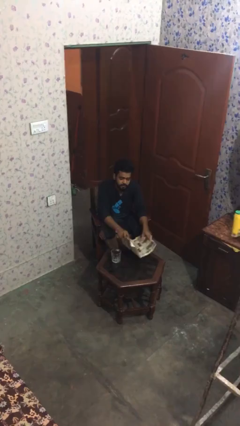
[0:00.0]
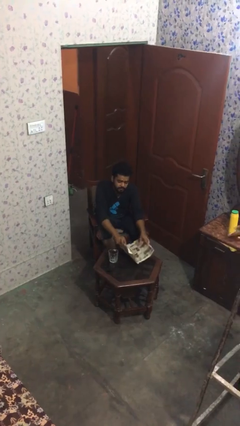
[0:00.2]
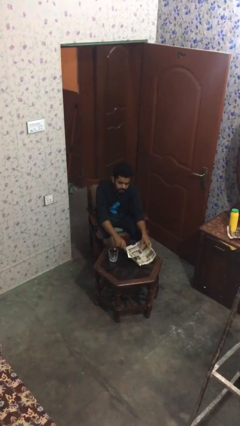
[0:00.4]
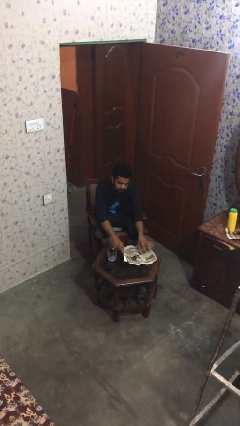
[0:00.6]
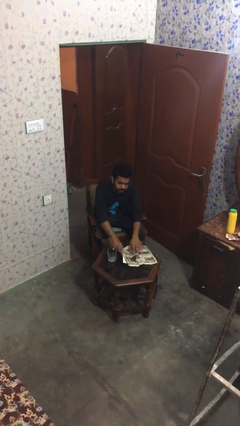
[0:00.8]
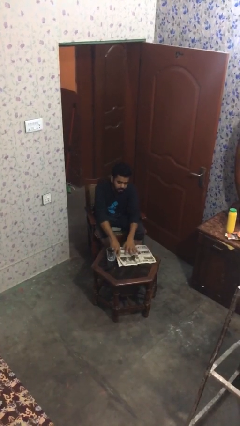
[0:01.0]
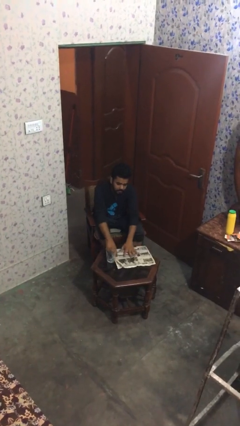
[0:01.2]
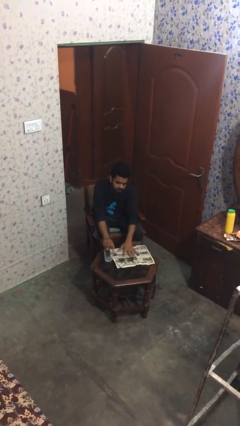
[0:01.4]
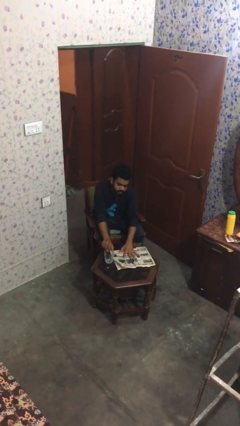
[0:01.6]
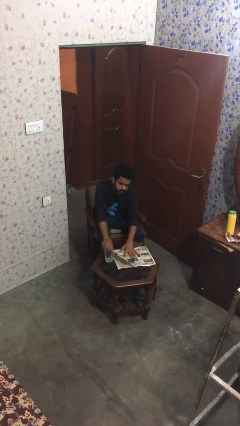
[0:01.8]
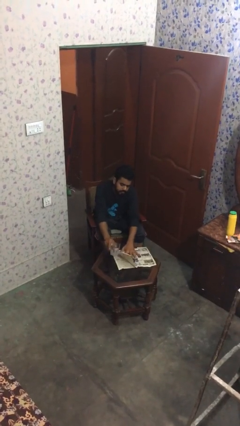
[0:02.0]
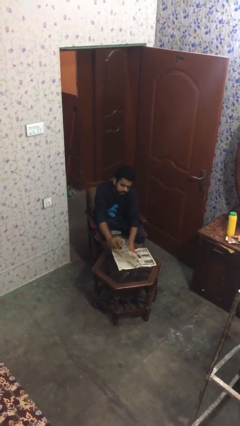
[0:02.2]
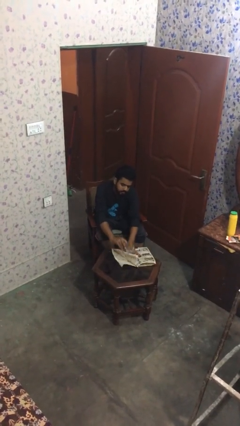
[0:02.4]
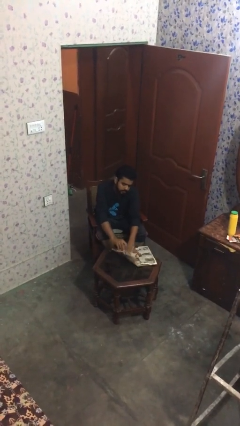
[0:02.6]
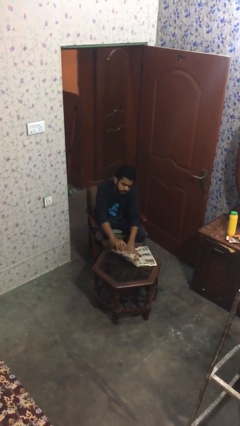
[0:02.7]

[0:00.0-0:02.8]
person puts down object on table

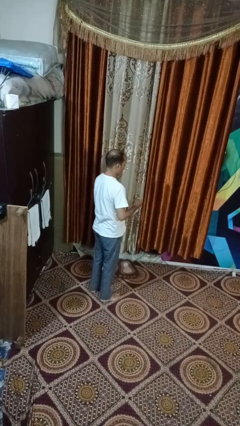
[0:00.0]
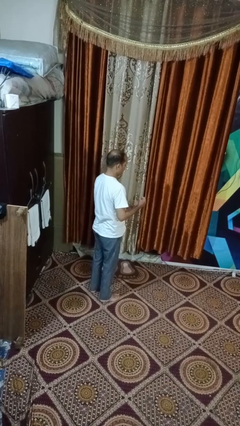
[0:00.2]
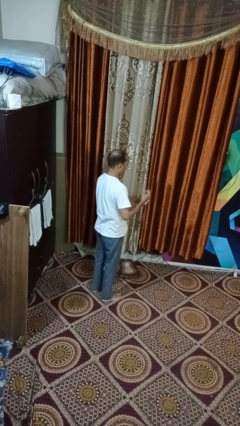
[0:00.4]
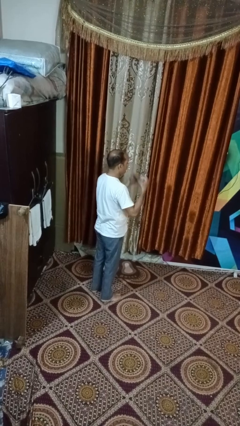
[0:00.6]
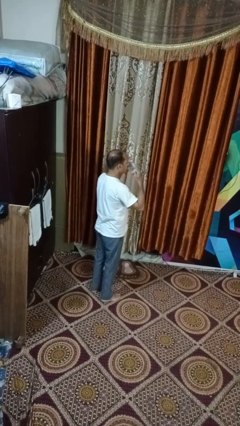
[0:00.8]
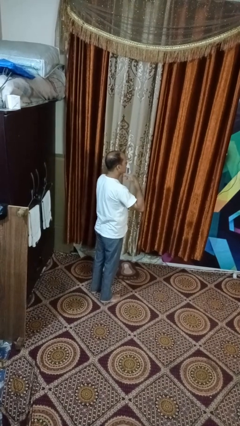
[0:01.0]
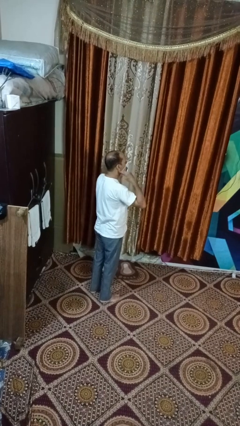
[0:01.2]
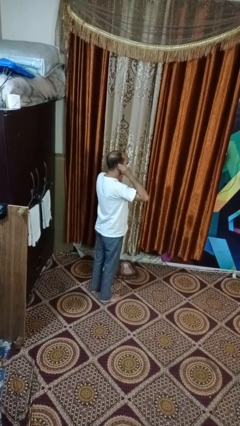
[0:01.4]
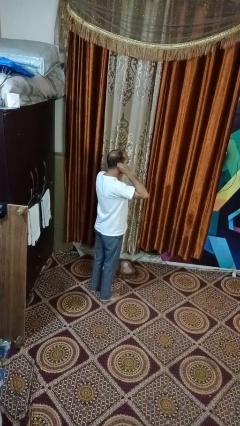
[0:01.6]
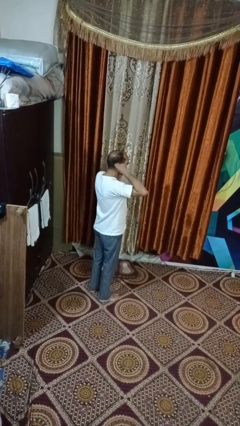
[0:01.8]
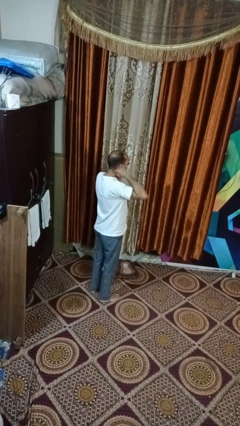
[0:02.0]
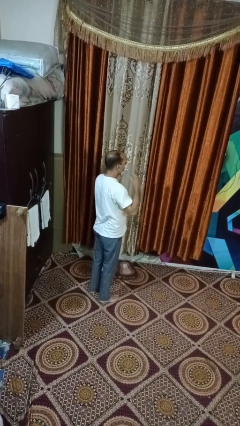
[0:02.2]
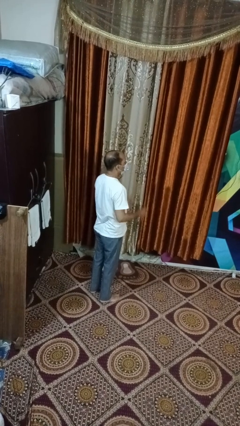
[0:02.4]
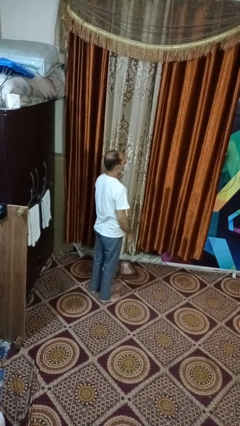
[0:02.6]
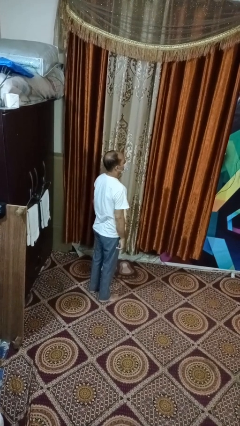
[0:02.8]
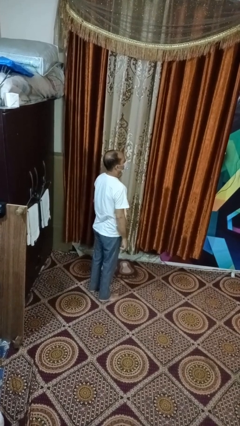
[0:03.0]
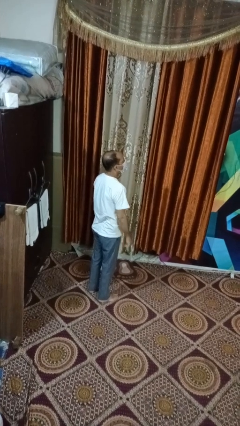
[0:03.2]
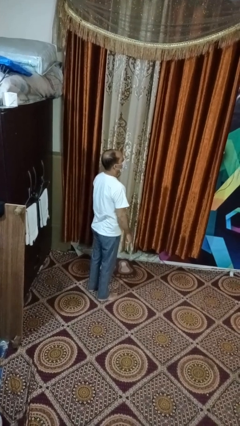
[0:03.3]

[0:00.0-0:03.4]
person puts on facemask

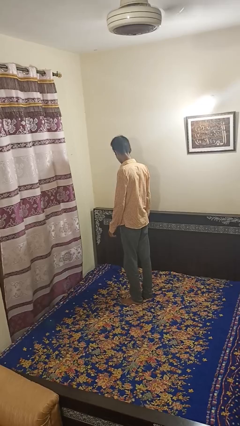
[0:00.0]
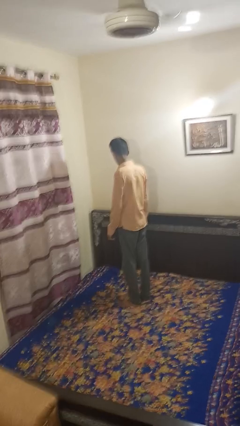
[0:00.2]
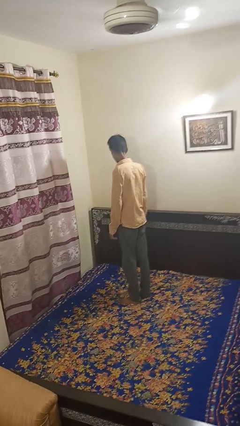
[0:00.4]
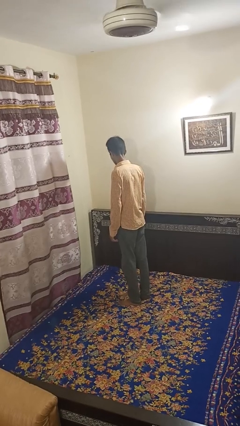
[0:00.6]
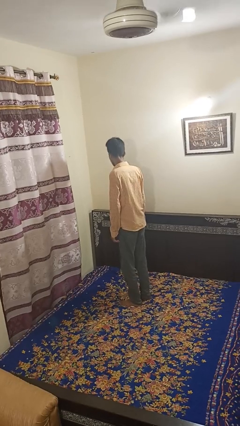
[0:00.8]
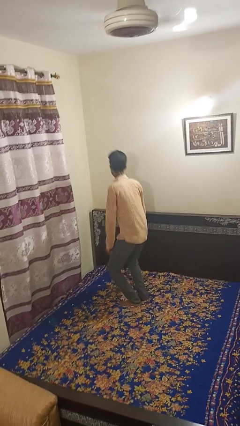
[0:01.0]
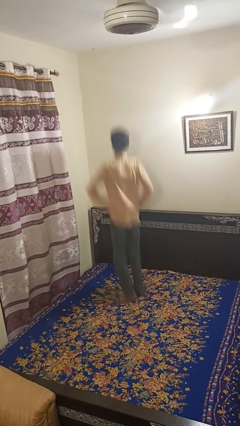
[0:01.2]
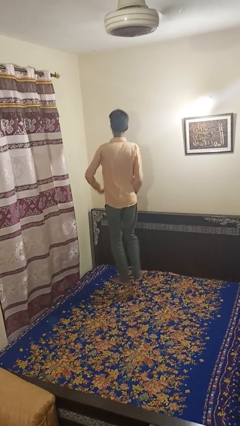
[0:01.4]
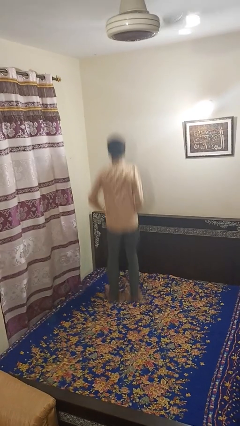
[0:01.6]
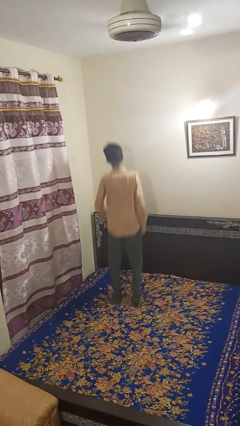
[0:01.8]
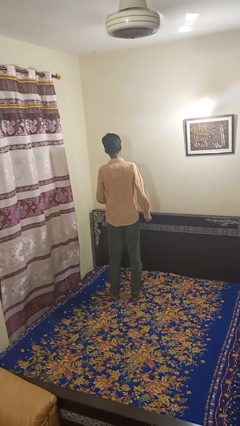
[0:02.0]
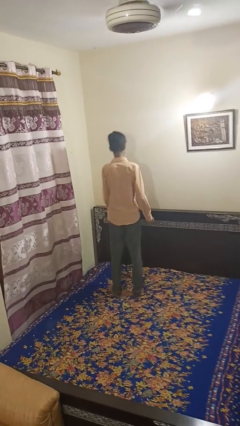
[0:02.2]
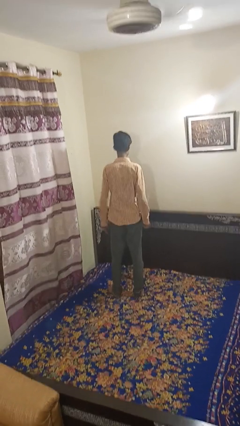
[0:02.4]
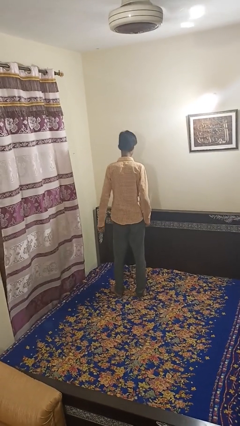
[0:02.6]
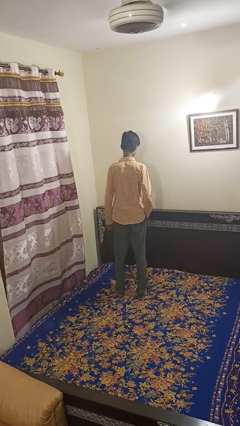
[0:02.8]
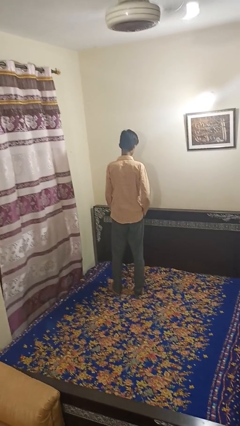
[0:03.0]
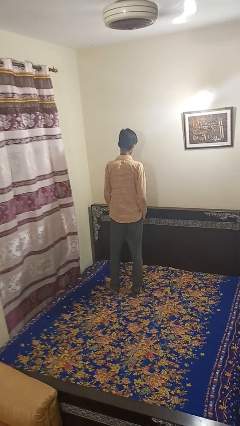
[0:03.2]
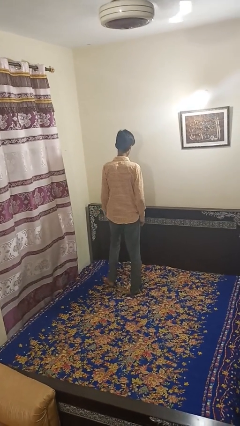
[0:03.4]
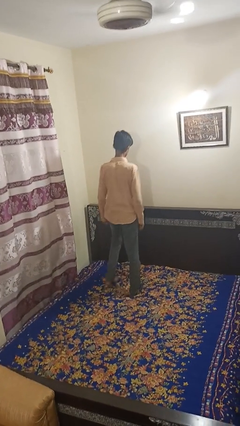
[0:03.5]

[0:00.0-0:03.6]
person jumps on bed

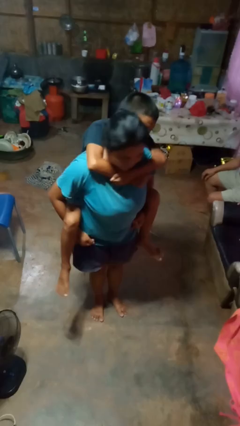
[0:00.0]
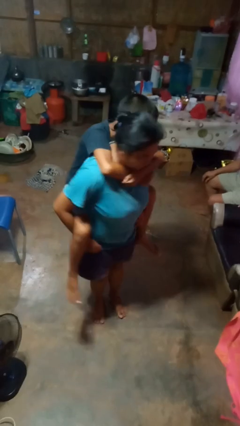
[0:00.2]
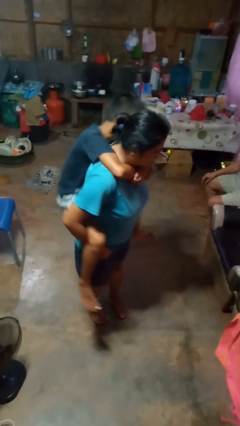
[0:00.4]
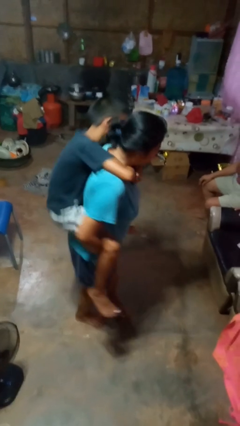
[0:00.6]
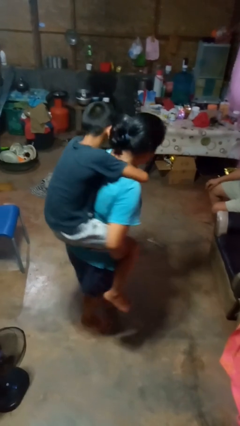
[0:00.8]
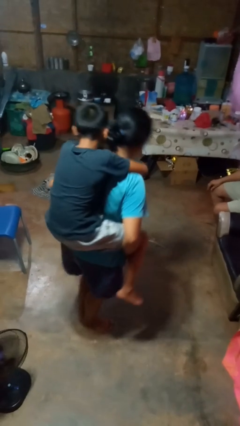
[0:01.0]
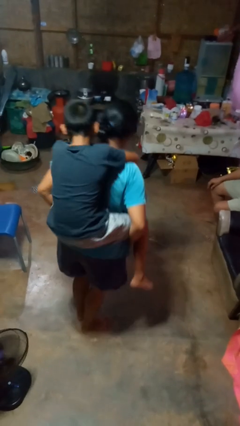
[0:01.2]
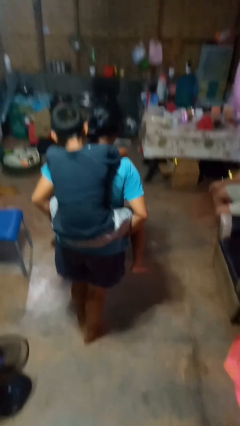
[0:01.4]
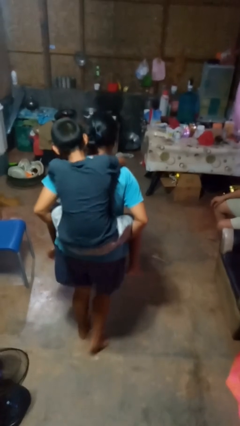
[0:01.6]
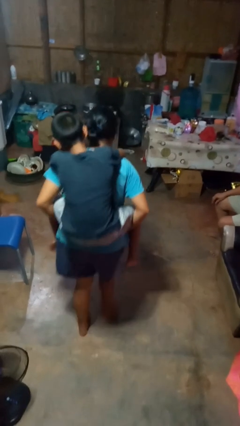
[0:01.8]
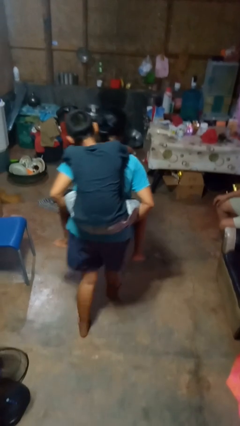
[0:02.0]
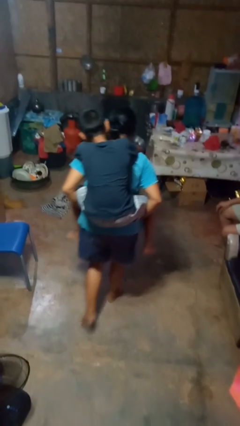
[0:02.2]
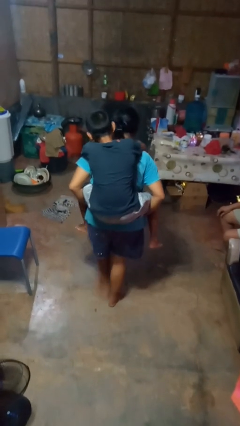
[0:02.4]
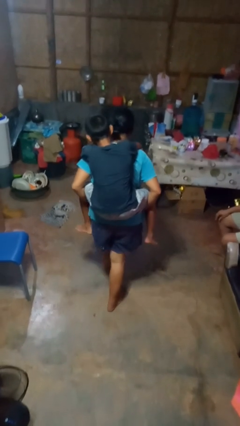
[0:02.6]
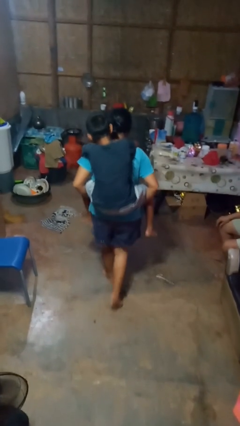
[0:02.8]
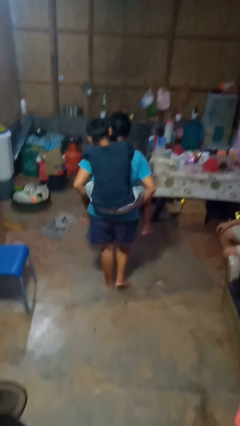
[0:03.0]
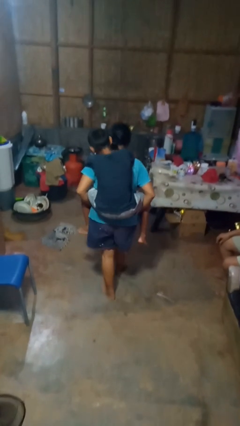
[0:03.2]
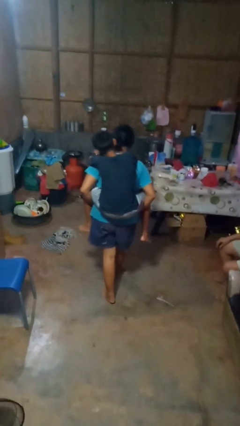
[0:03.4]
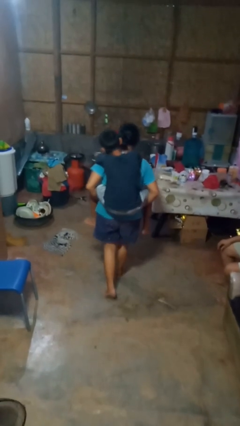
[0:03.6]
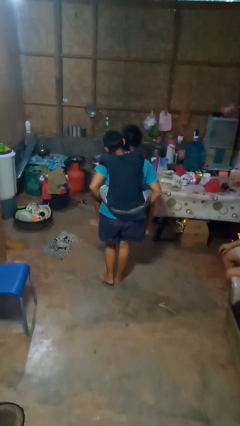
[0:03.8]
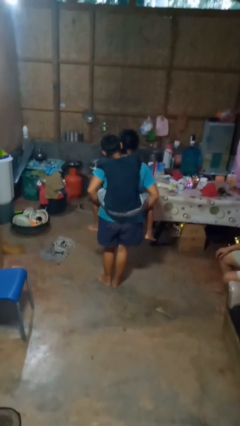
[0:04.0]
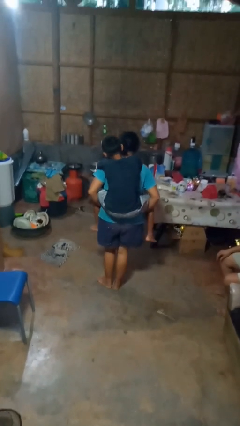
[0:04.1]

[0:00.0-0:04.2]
person carries person on back

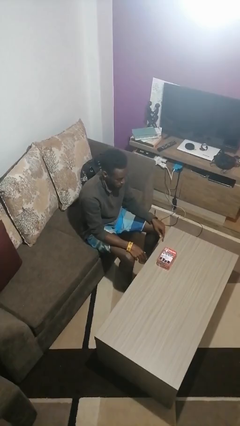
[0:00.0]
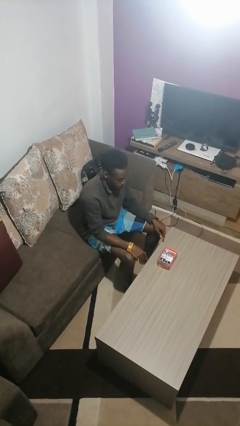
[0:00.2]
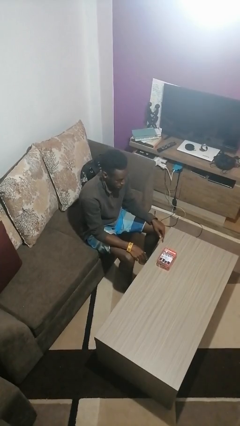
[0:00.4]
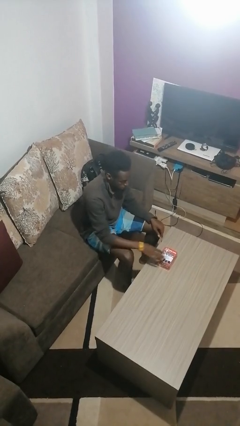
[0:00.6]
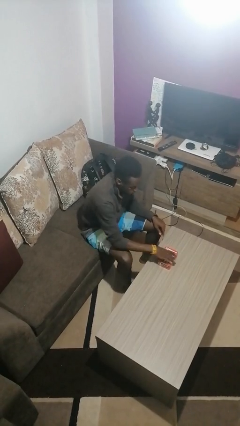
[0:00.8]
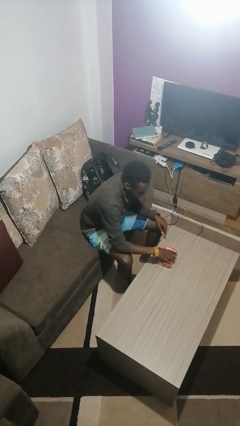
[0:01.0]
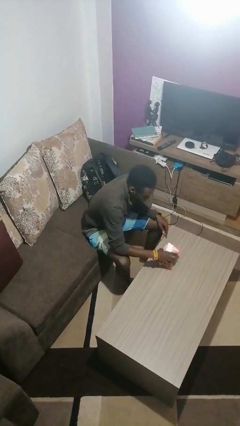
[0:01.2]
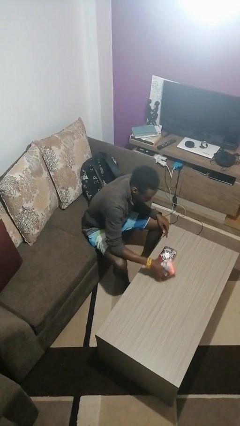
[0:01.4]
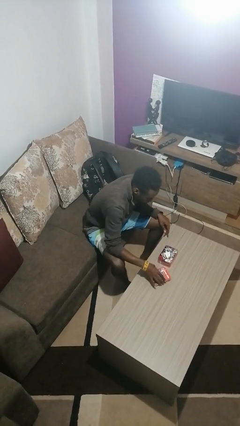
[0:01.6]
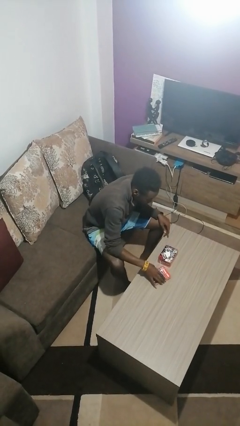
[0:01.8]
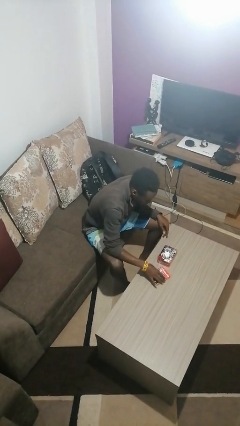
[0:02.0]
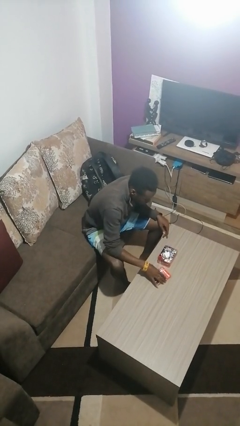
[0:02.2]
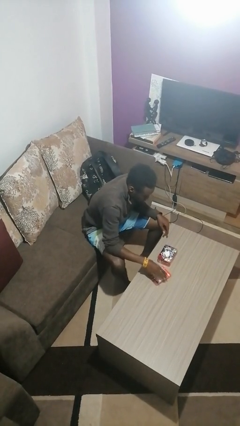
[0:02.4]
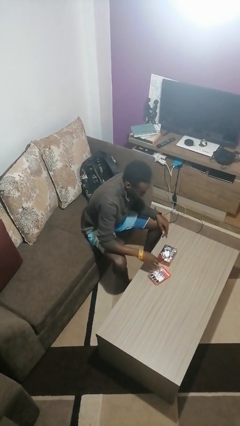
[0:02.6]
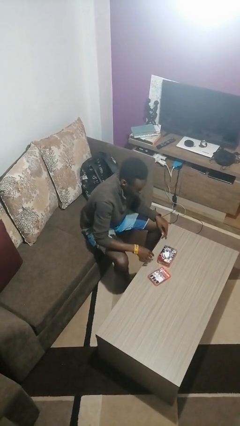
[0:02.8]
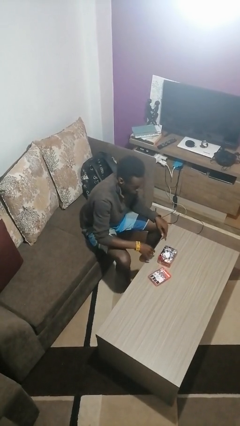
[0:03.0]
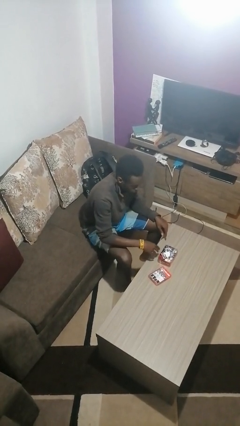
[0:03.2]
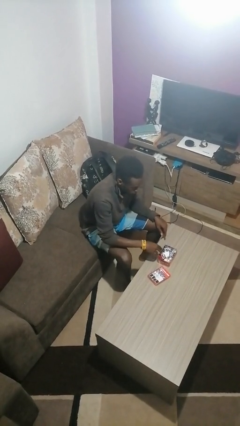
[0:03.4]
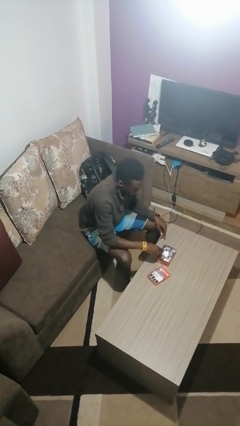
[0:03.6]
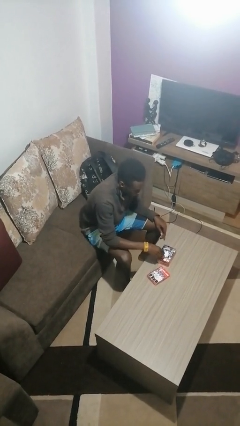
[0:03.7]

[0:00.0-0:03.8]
person opens jewelry box
